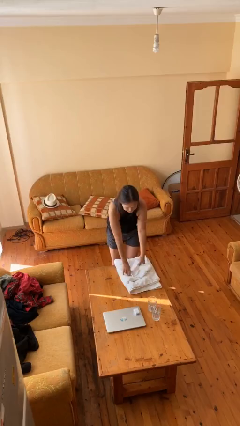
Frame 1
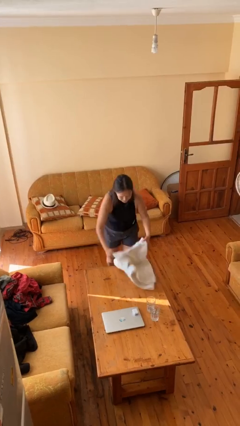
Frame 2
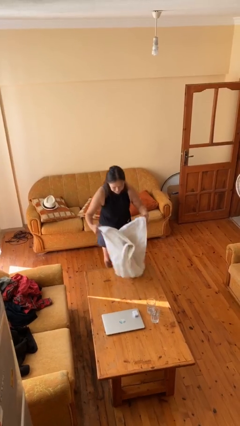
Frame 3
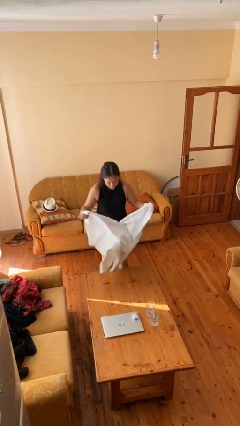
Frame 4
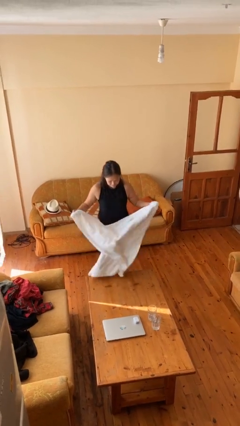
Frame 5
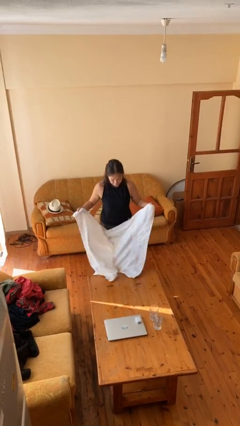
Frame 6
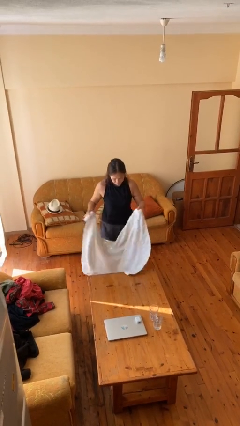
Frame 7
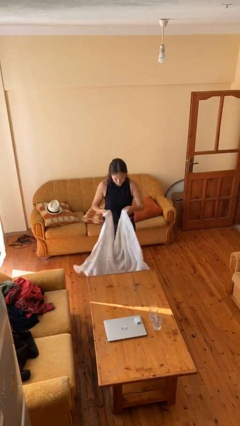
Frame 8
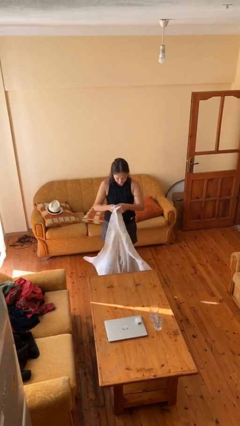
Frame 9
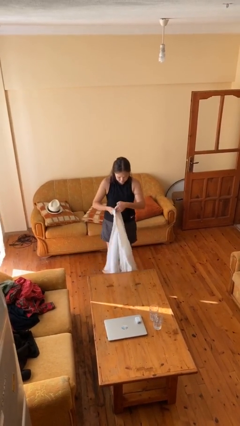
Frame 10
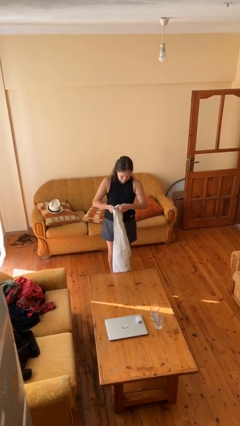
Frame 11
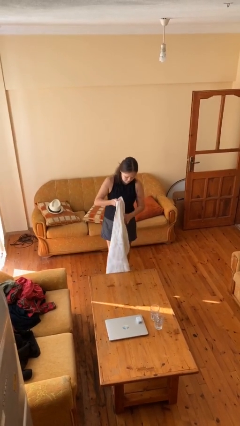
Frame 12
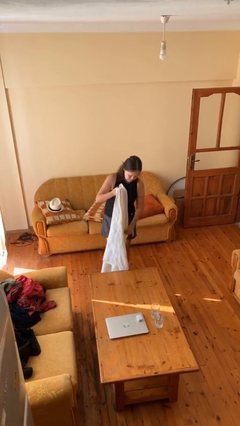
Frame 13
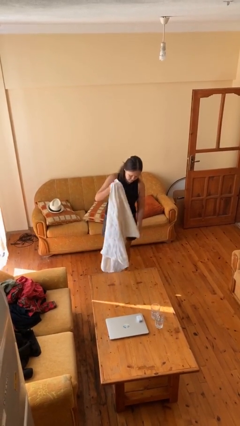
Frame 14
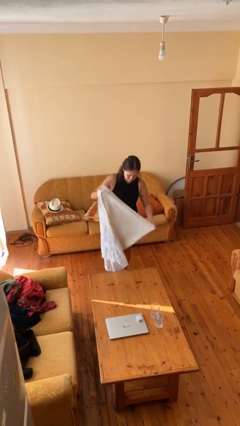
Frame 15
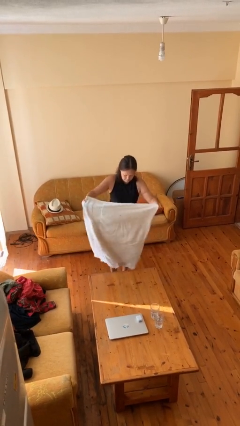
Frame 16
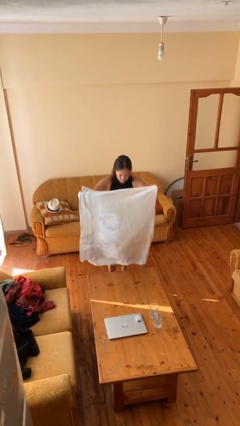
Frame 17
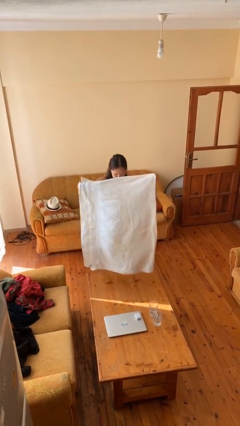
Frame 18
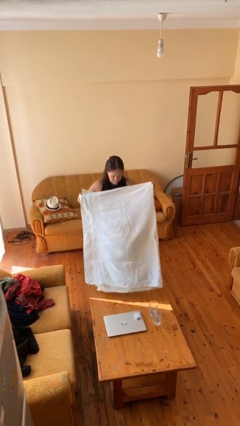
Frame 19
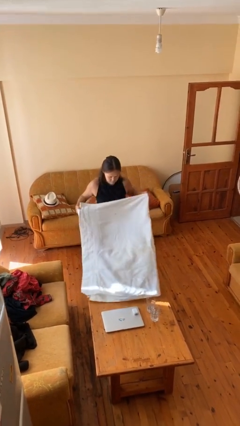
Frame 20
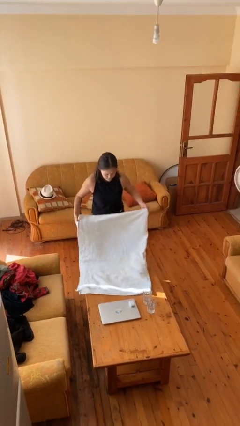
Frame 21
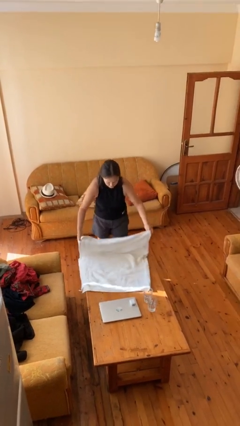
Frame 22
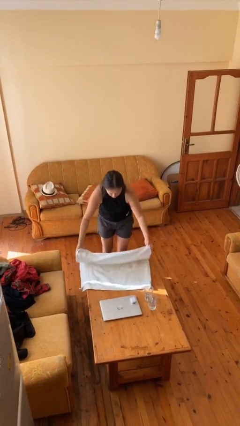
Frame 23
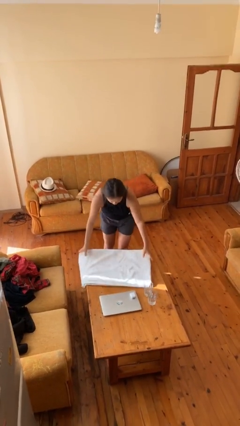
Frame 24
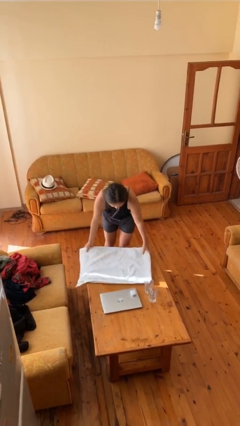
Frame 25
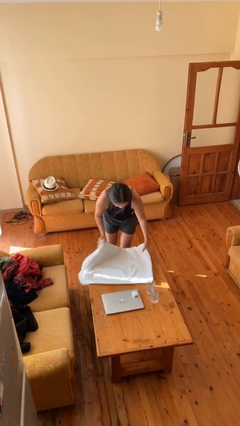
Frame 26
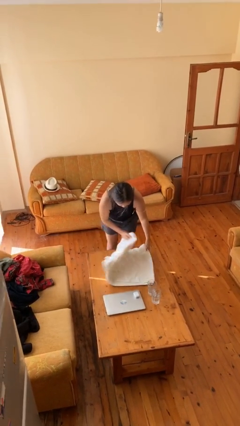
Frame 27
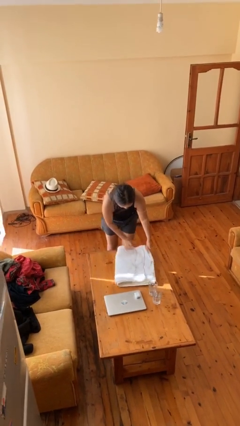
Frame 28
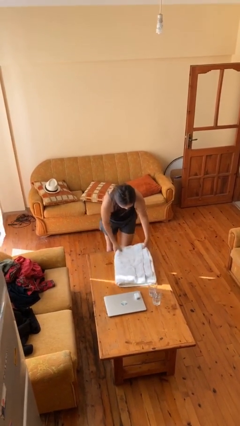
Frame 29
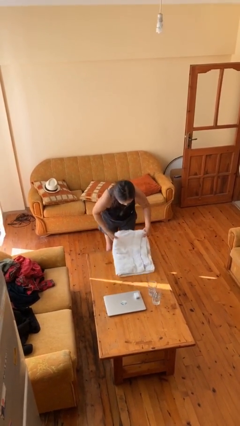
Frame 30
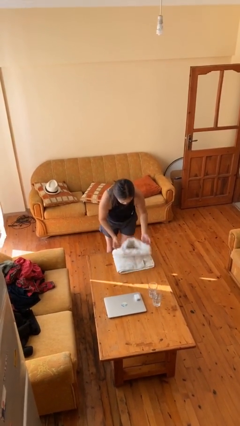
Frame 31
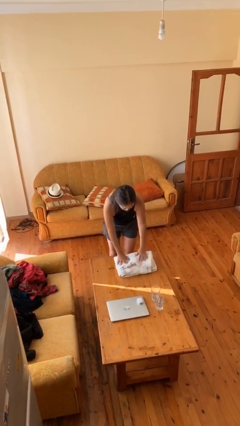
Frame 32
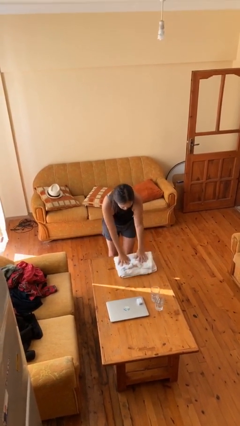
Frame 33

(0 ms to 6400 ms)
person folds towel

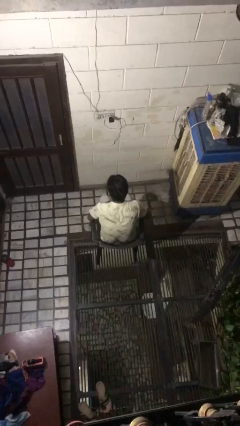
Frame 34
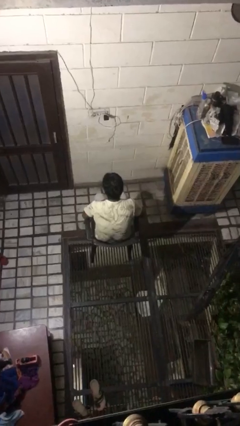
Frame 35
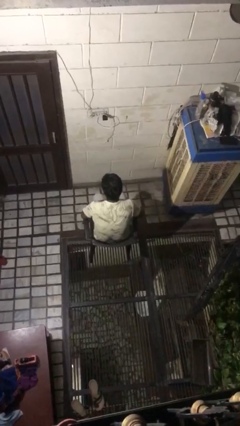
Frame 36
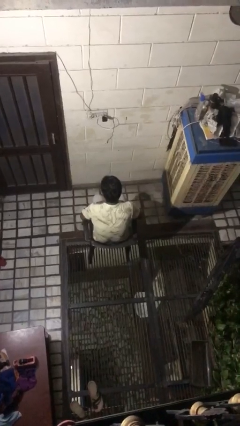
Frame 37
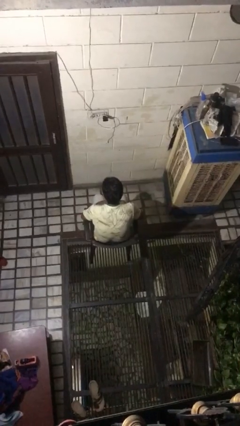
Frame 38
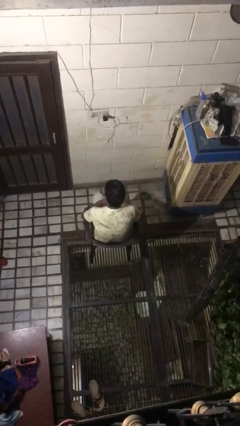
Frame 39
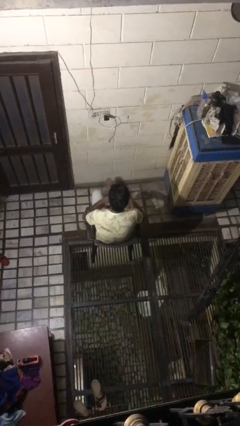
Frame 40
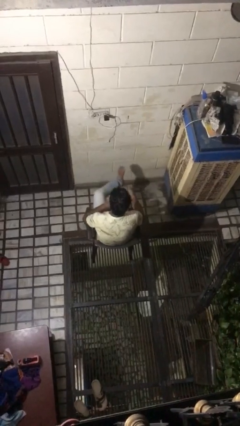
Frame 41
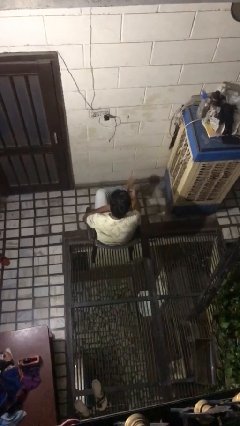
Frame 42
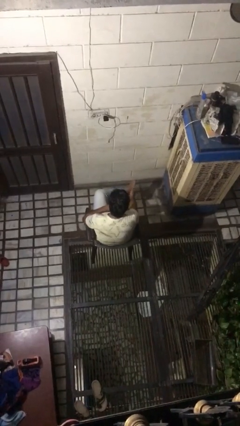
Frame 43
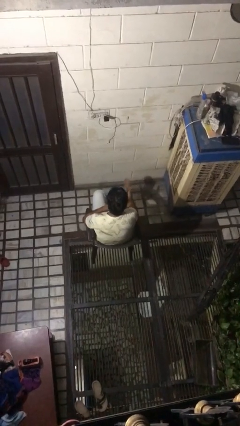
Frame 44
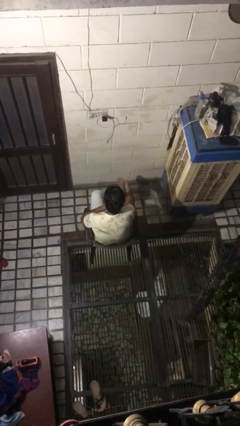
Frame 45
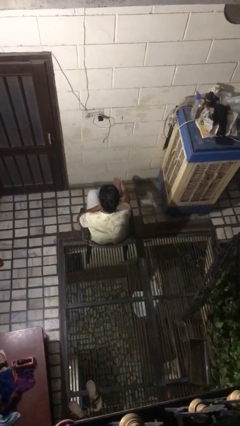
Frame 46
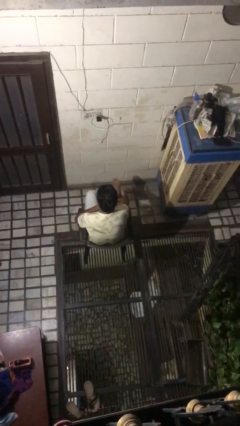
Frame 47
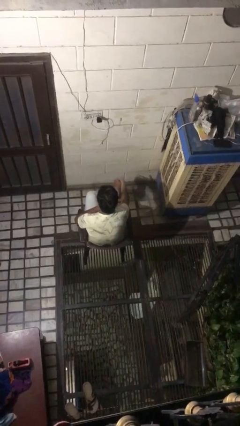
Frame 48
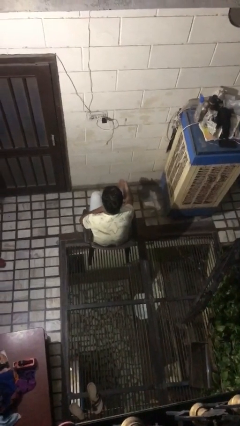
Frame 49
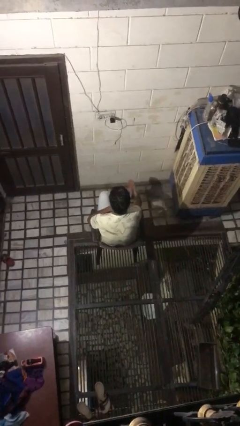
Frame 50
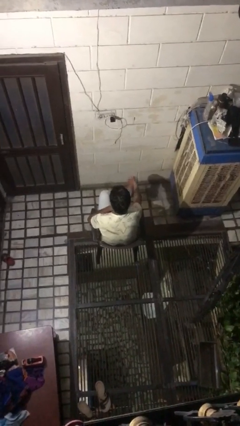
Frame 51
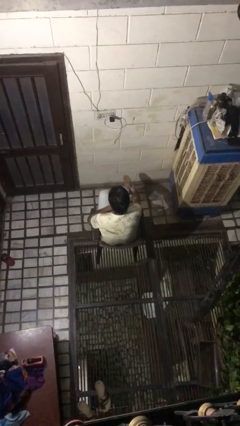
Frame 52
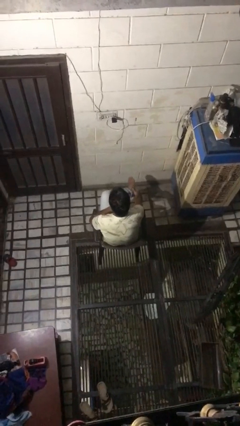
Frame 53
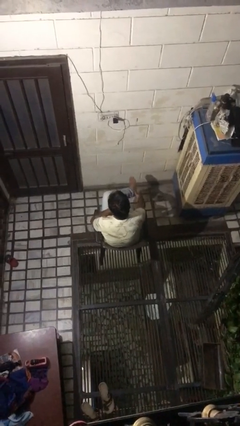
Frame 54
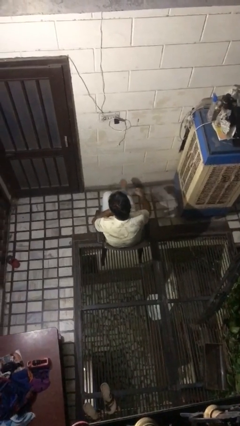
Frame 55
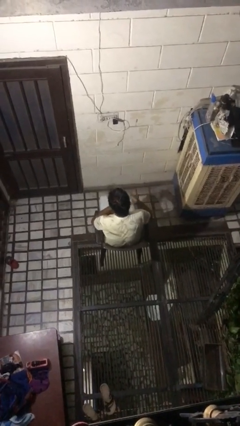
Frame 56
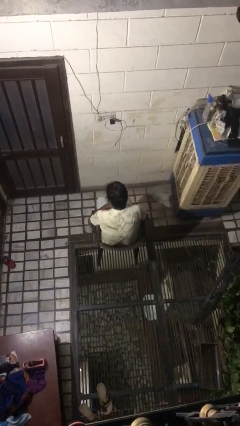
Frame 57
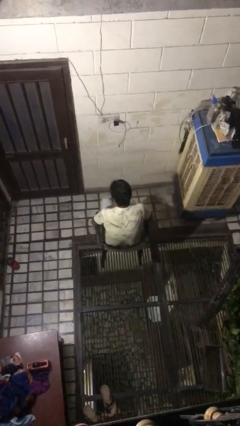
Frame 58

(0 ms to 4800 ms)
person rubs foot

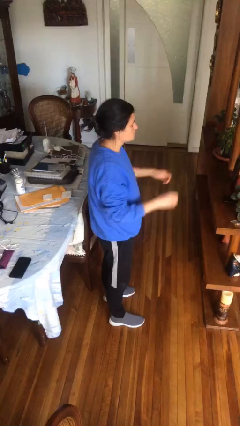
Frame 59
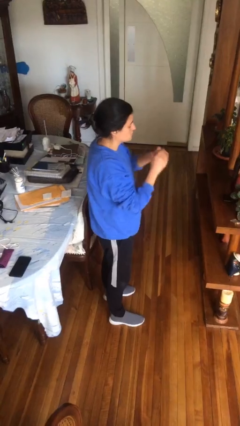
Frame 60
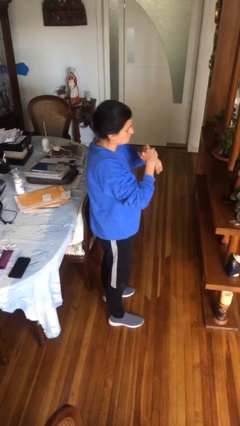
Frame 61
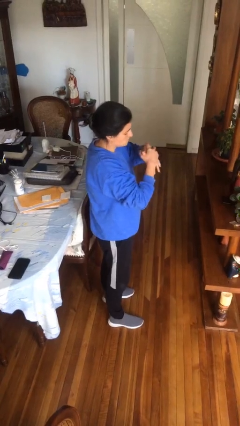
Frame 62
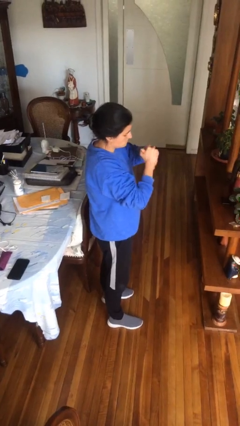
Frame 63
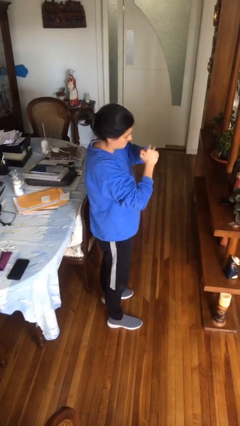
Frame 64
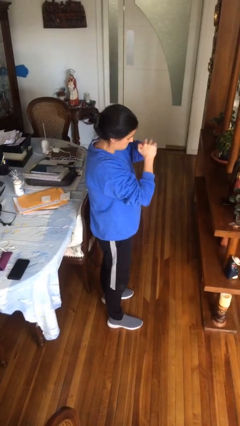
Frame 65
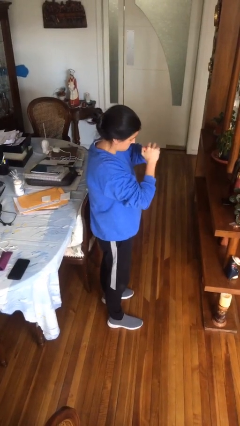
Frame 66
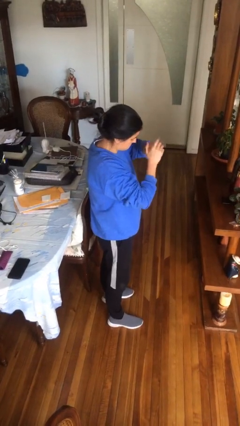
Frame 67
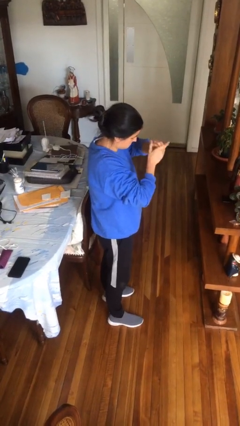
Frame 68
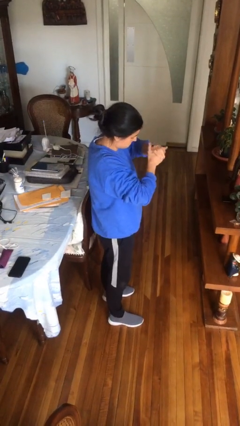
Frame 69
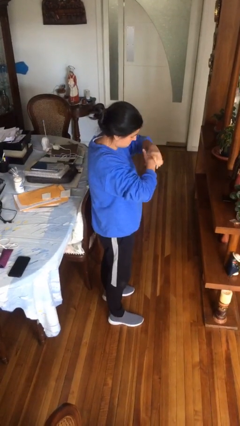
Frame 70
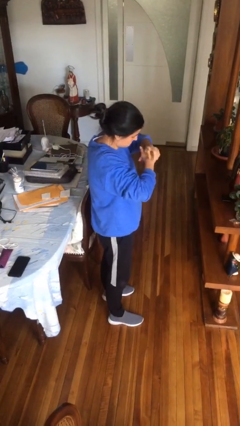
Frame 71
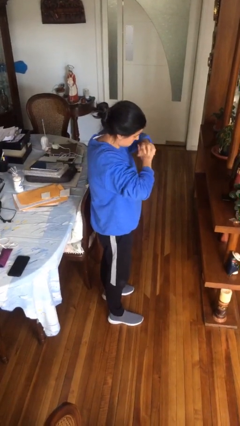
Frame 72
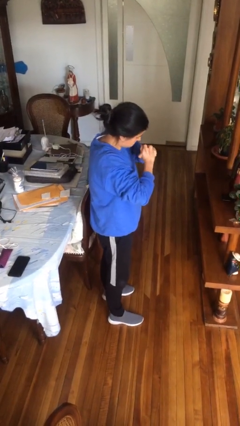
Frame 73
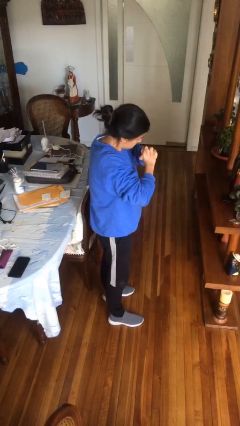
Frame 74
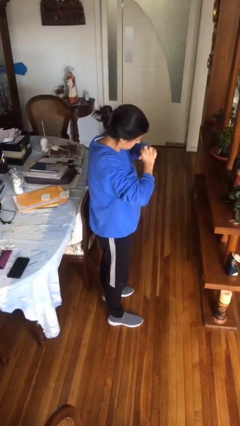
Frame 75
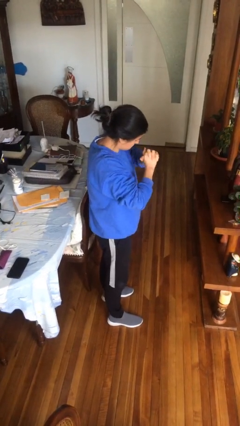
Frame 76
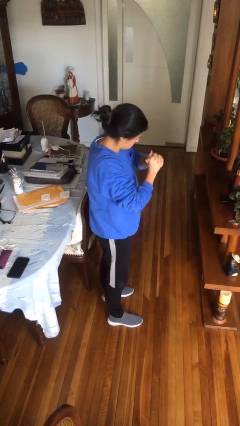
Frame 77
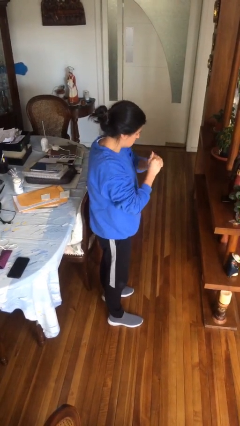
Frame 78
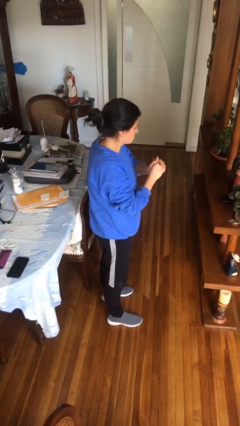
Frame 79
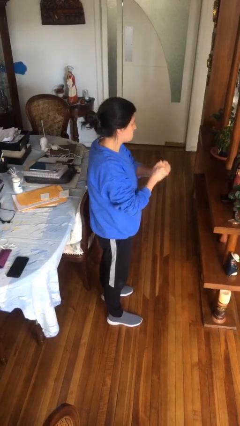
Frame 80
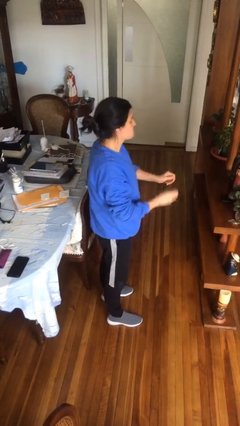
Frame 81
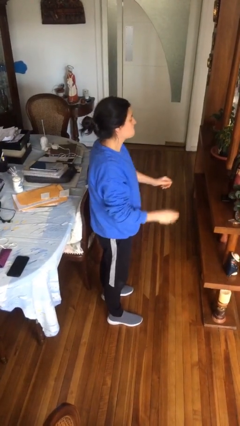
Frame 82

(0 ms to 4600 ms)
person cracks knuckles

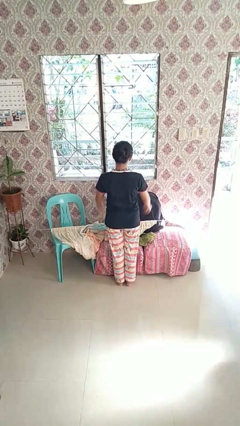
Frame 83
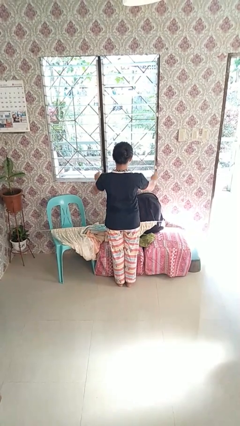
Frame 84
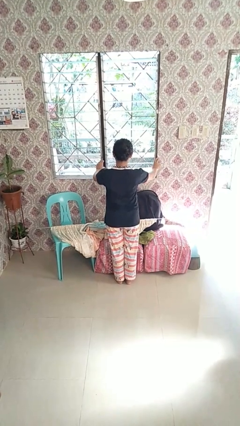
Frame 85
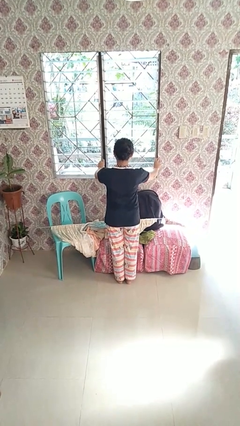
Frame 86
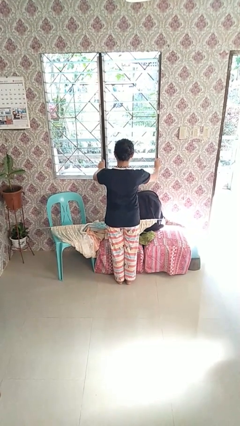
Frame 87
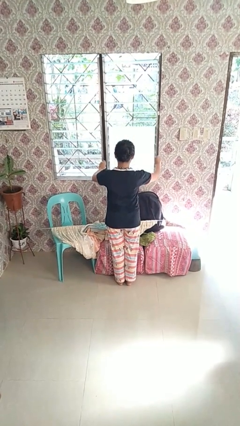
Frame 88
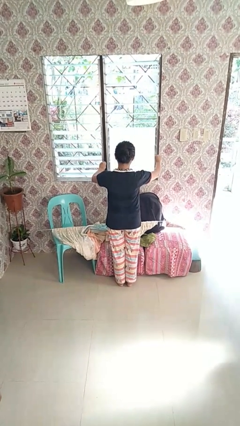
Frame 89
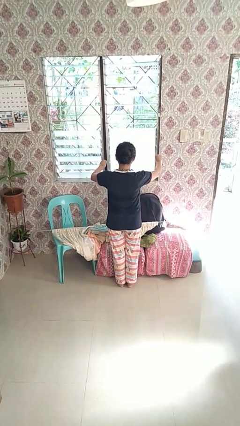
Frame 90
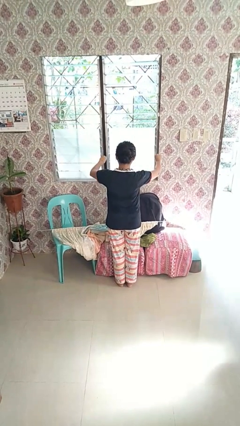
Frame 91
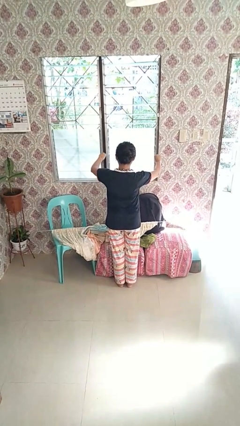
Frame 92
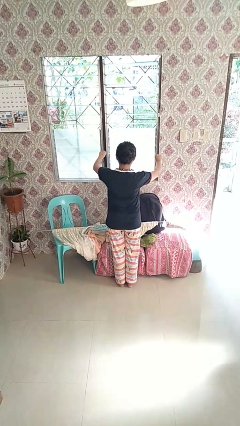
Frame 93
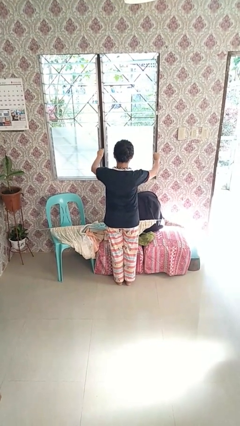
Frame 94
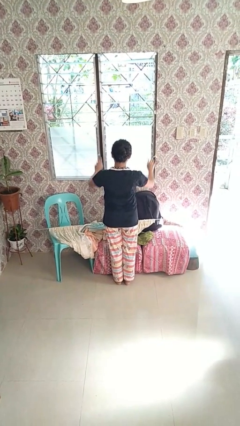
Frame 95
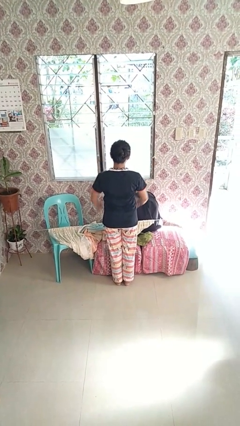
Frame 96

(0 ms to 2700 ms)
person closes home window
